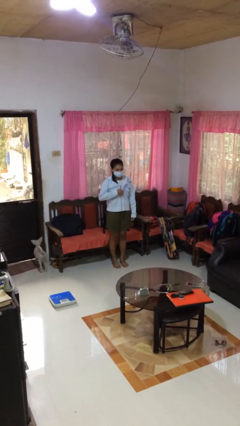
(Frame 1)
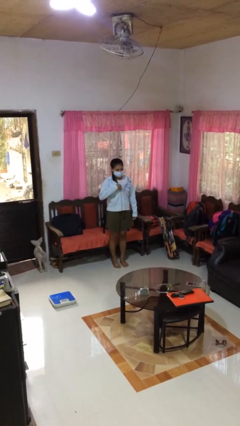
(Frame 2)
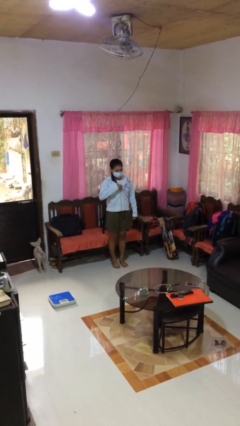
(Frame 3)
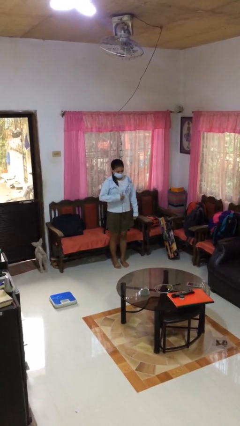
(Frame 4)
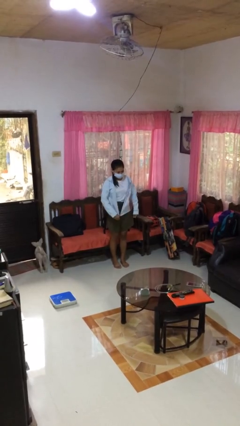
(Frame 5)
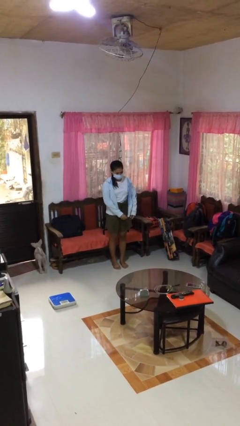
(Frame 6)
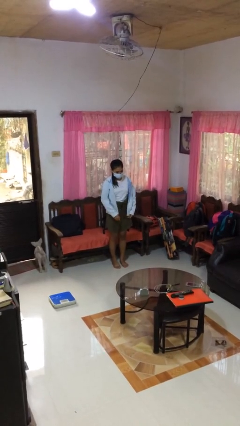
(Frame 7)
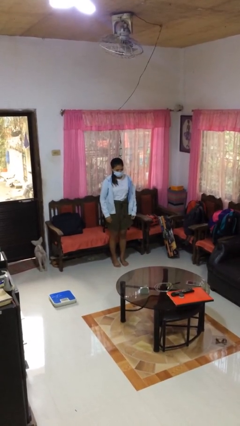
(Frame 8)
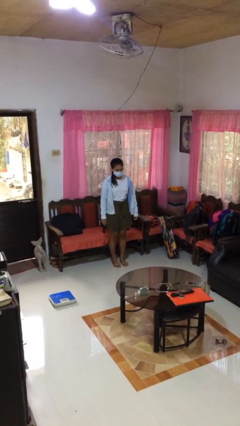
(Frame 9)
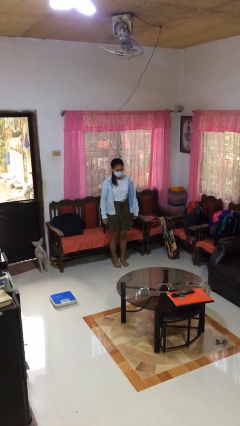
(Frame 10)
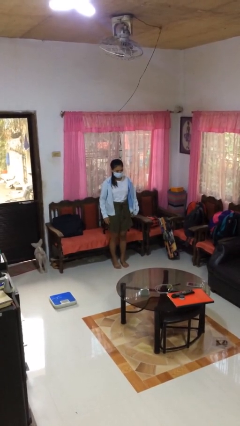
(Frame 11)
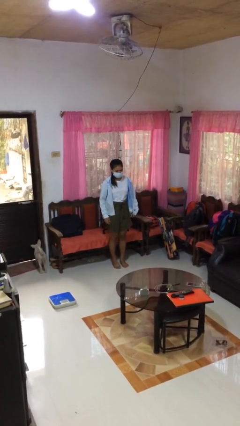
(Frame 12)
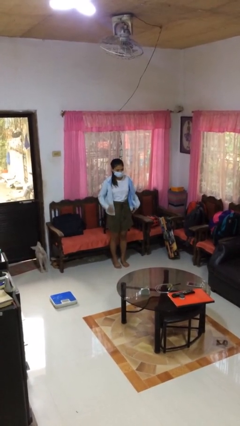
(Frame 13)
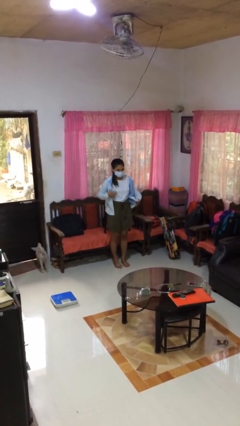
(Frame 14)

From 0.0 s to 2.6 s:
person unzips jacket

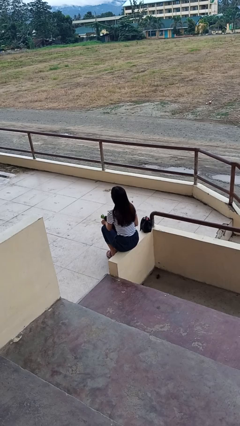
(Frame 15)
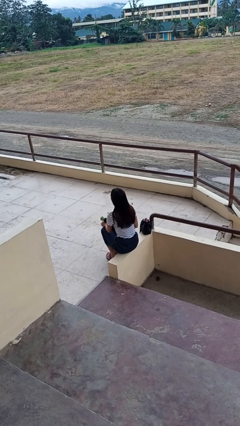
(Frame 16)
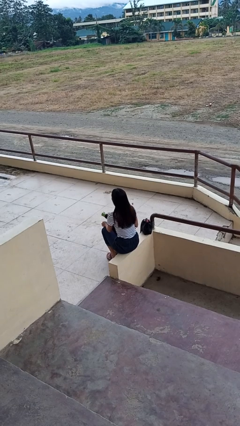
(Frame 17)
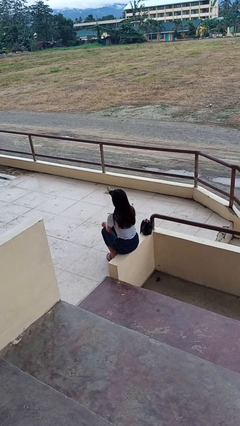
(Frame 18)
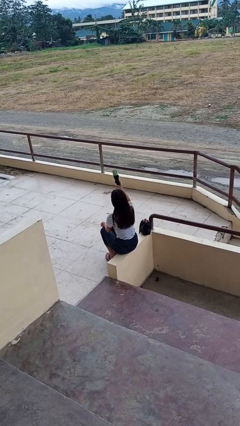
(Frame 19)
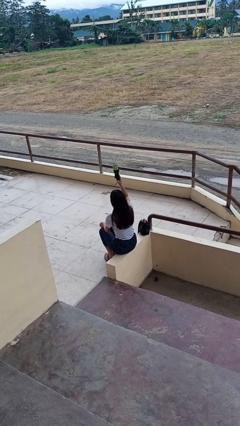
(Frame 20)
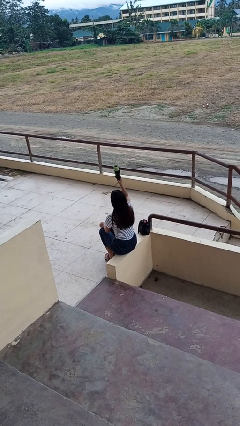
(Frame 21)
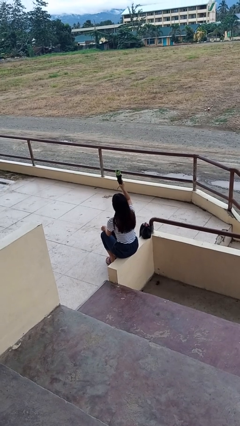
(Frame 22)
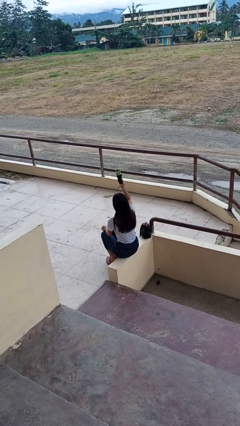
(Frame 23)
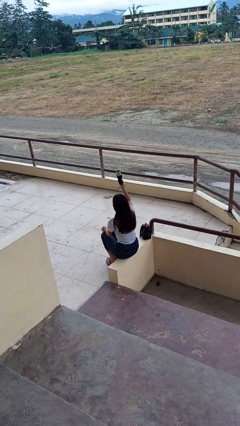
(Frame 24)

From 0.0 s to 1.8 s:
person holds object above head

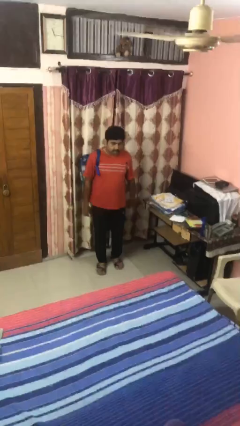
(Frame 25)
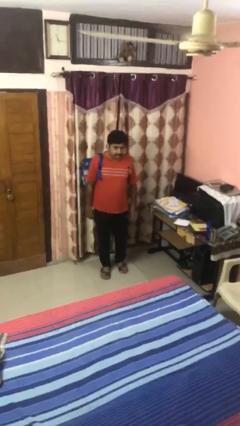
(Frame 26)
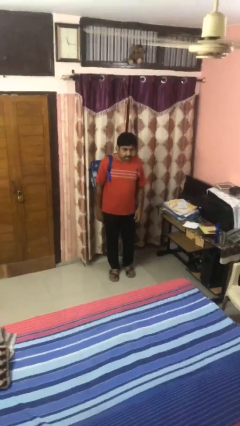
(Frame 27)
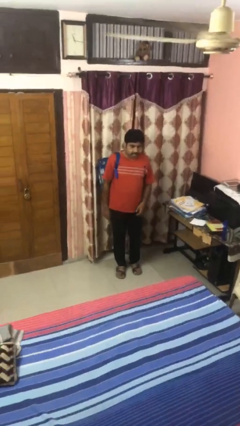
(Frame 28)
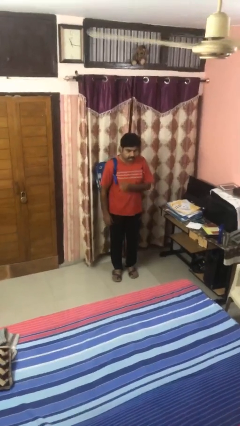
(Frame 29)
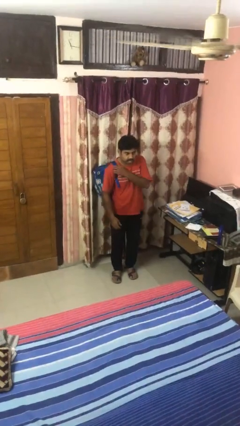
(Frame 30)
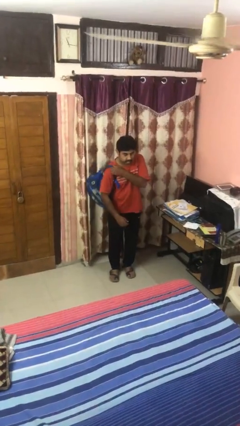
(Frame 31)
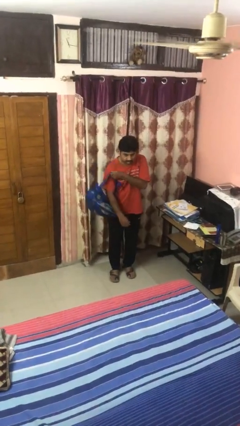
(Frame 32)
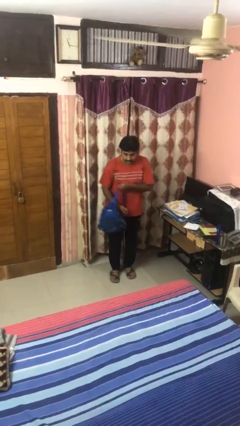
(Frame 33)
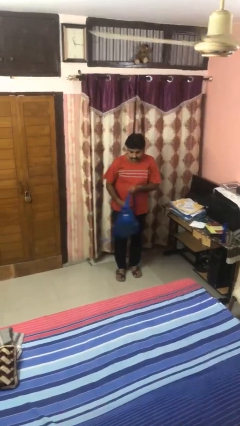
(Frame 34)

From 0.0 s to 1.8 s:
person takes off backpack

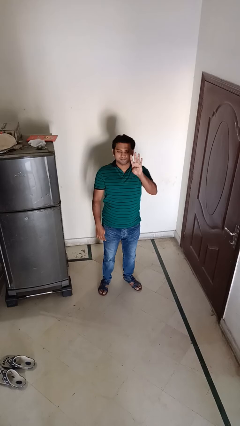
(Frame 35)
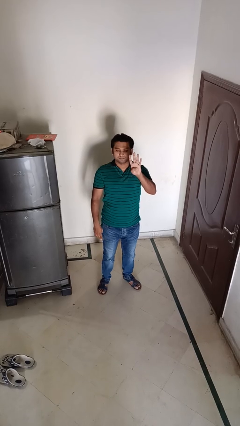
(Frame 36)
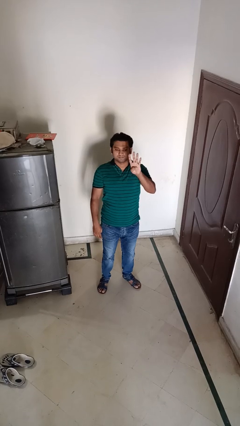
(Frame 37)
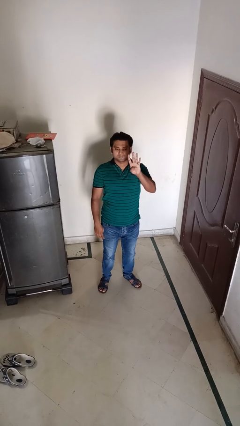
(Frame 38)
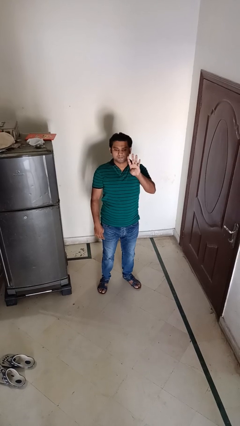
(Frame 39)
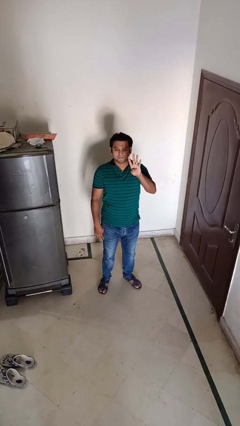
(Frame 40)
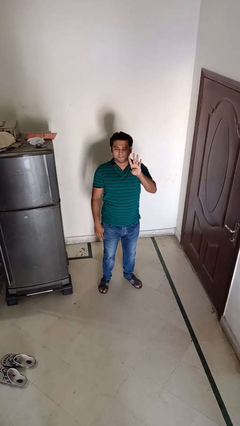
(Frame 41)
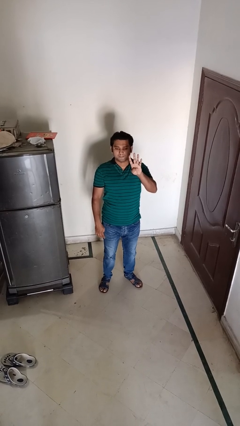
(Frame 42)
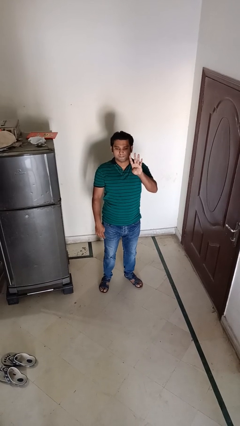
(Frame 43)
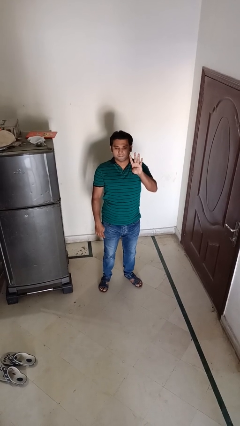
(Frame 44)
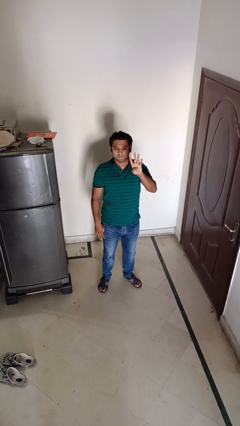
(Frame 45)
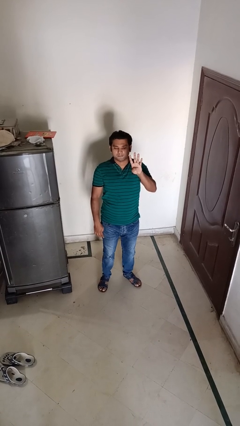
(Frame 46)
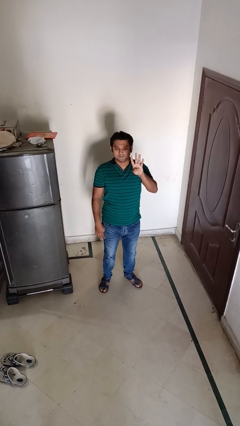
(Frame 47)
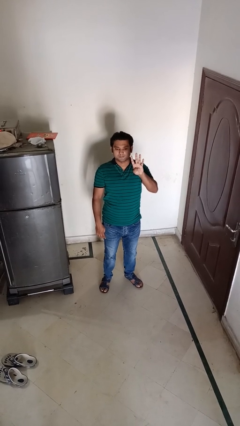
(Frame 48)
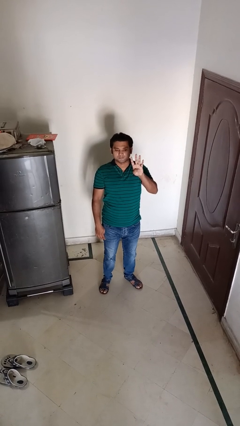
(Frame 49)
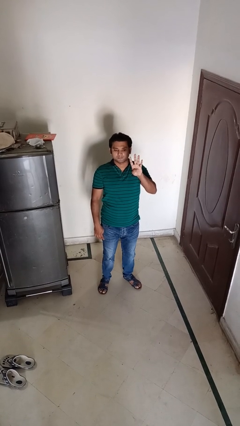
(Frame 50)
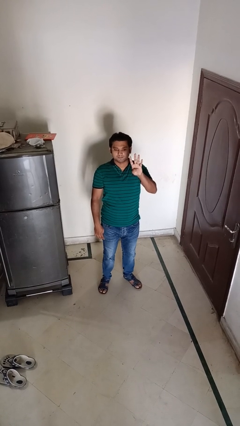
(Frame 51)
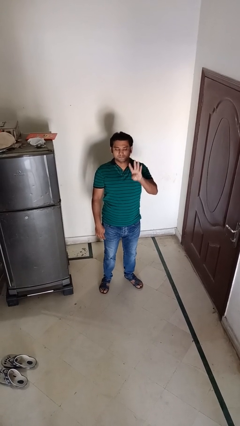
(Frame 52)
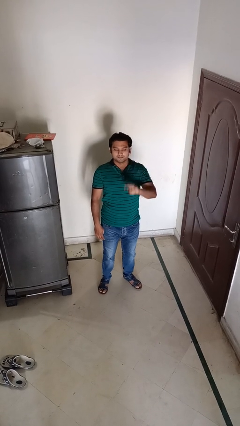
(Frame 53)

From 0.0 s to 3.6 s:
person gestures number four

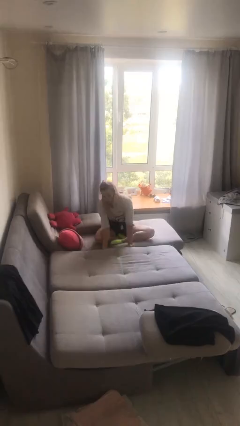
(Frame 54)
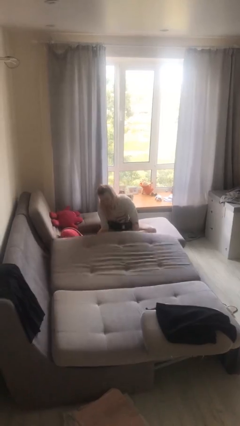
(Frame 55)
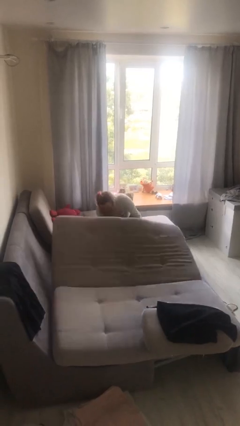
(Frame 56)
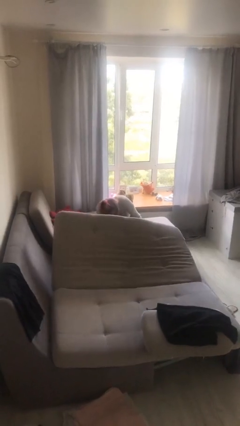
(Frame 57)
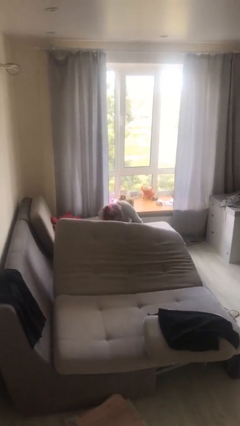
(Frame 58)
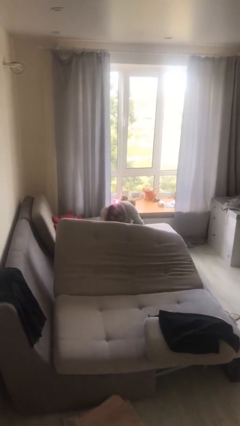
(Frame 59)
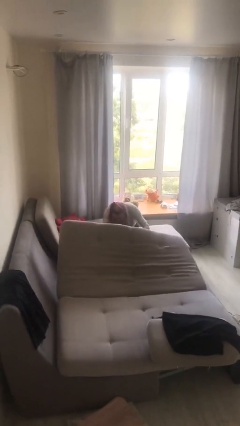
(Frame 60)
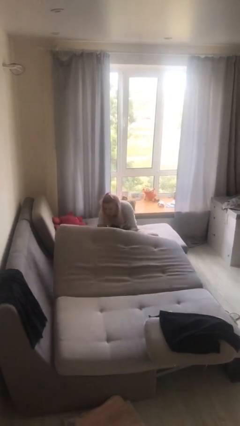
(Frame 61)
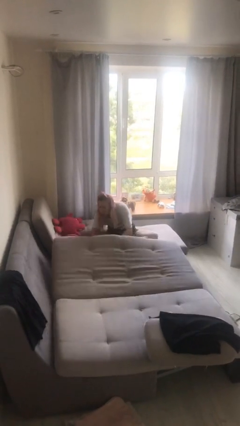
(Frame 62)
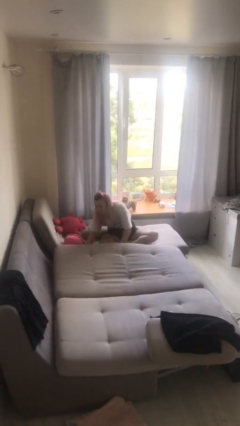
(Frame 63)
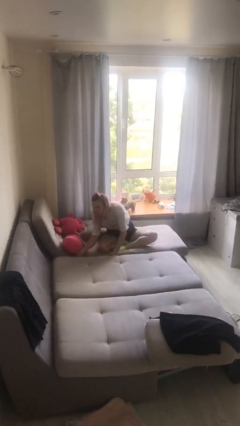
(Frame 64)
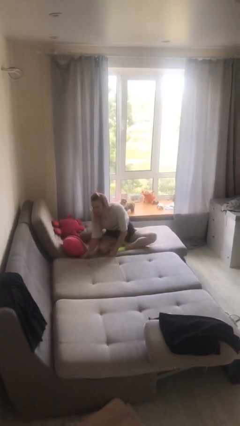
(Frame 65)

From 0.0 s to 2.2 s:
person searches under bed

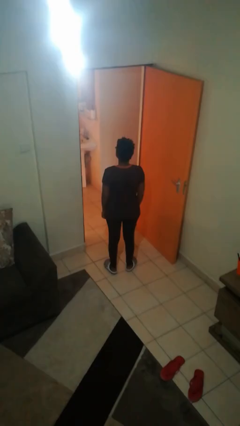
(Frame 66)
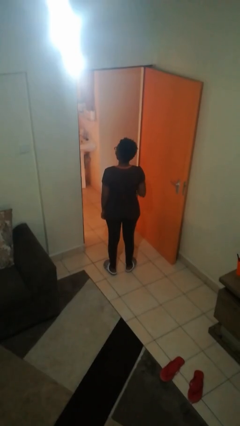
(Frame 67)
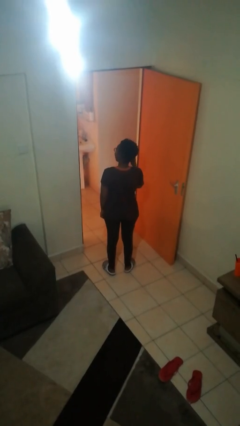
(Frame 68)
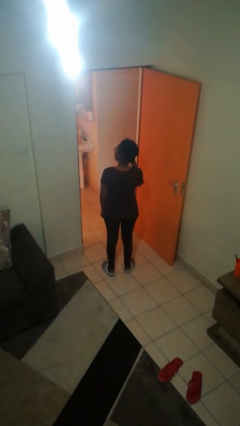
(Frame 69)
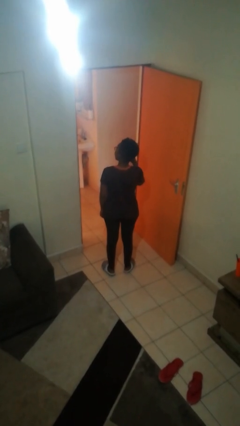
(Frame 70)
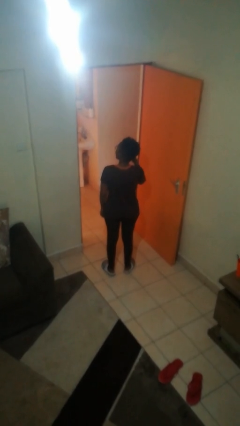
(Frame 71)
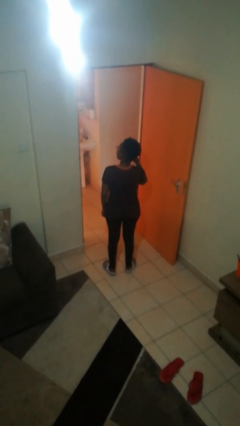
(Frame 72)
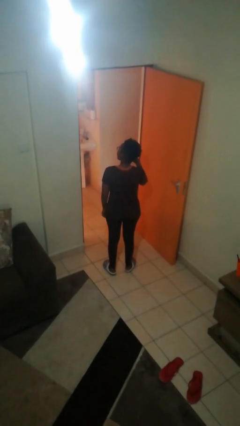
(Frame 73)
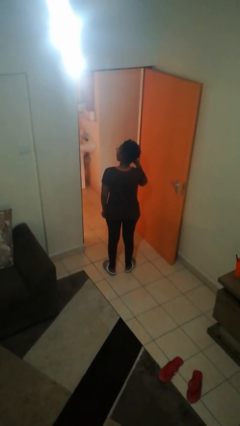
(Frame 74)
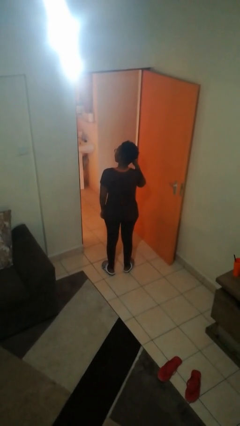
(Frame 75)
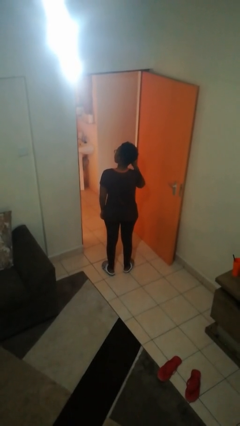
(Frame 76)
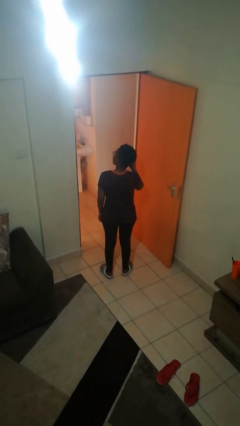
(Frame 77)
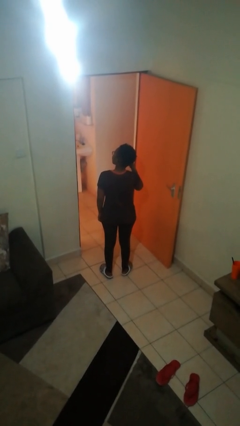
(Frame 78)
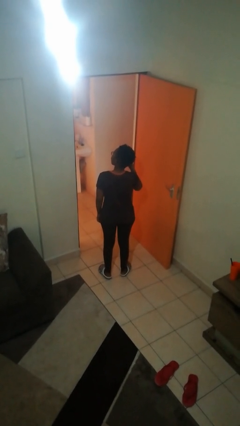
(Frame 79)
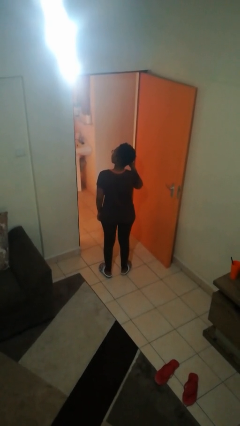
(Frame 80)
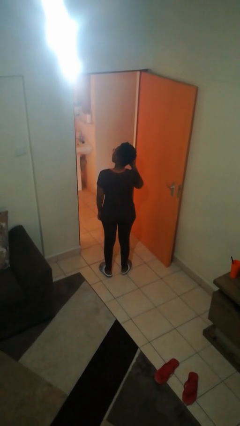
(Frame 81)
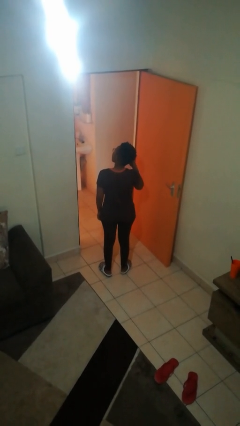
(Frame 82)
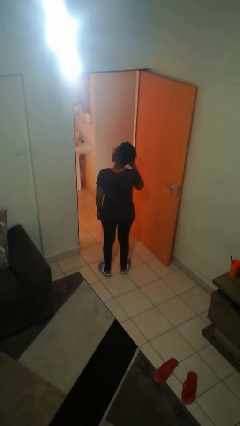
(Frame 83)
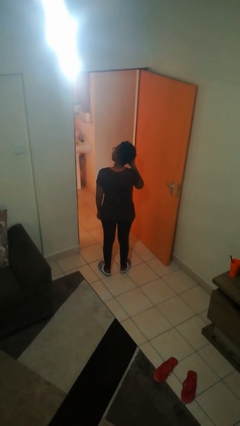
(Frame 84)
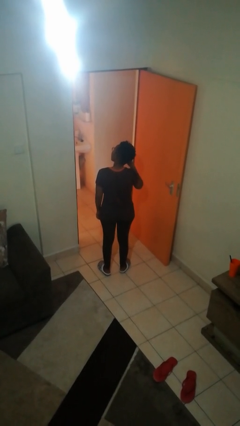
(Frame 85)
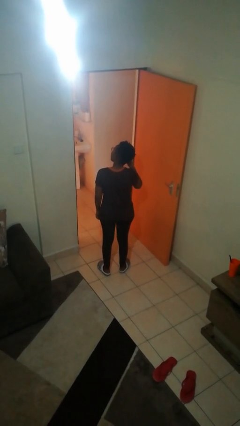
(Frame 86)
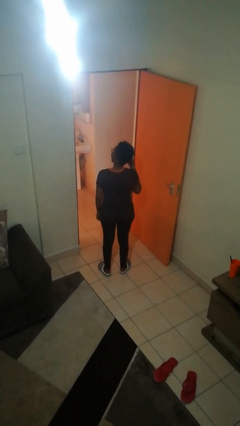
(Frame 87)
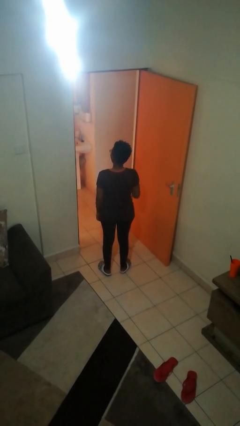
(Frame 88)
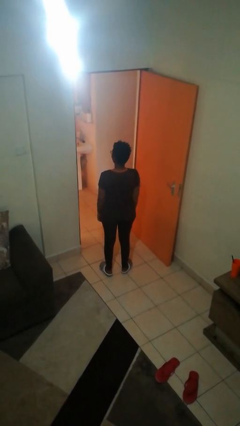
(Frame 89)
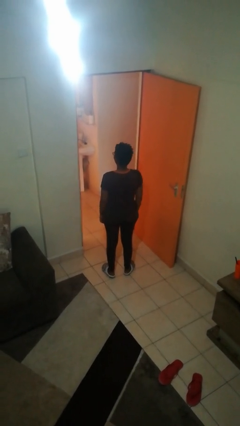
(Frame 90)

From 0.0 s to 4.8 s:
person takes off earrings

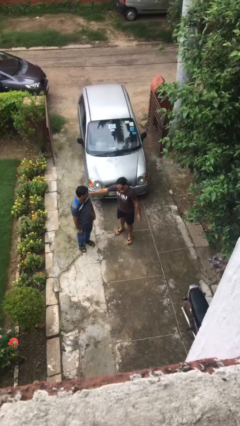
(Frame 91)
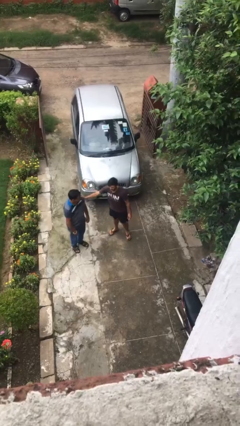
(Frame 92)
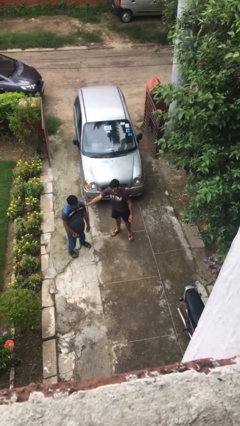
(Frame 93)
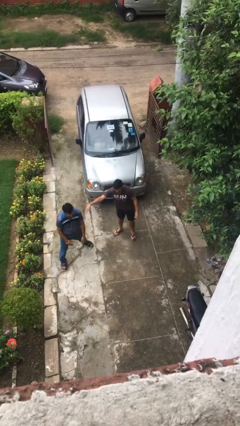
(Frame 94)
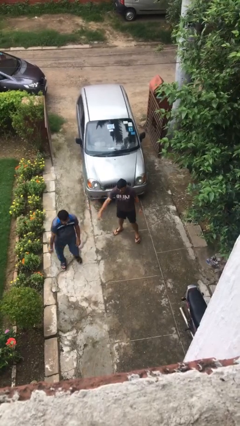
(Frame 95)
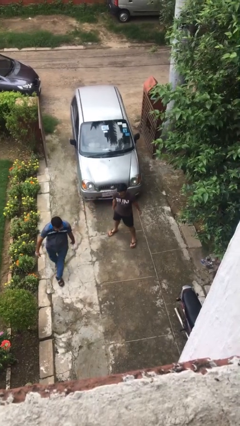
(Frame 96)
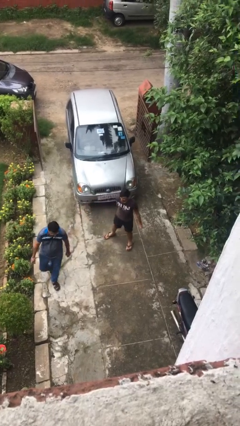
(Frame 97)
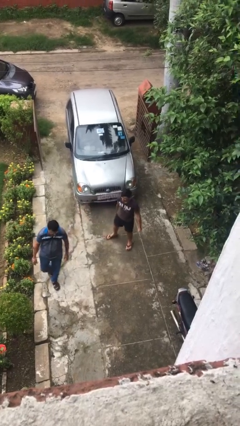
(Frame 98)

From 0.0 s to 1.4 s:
person shoves person
